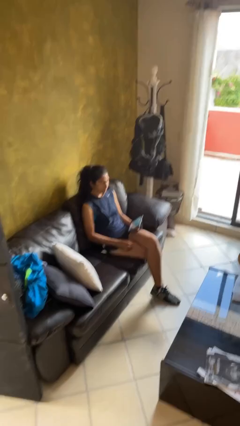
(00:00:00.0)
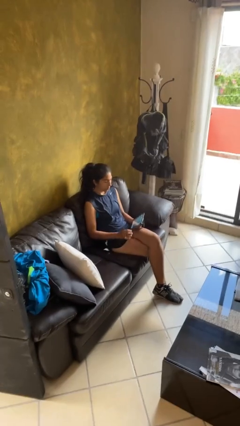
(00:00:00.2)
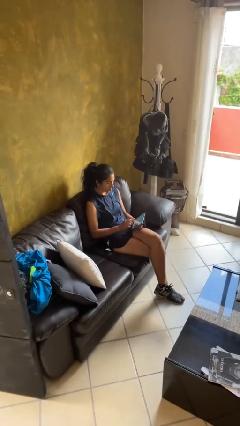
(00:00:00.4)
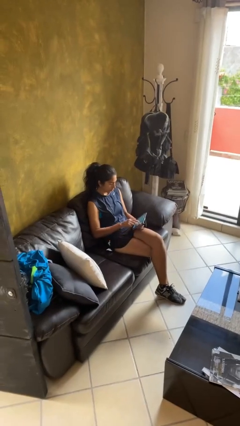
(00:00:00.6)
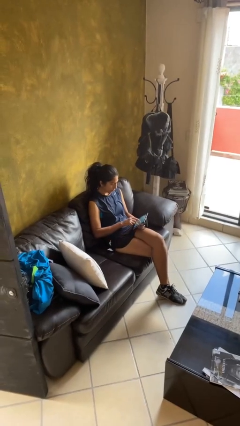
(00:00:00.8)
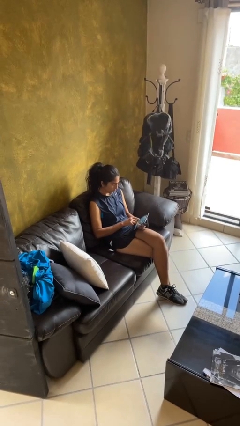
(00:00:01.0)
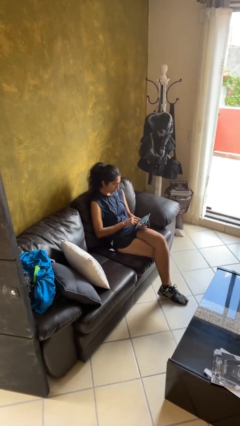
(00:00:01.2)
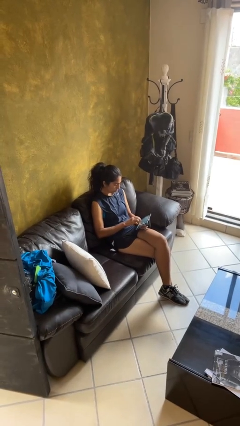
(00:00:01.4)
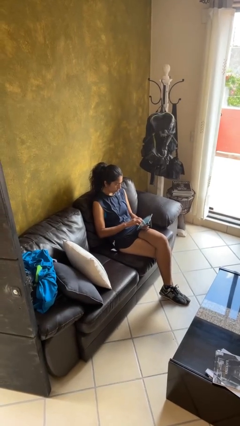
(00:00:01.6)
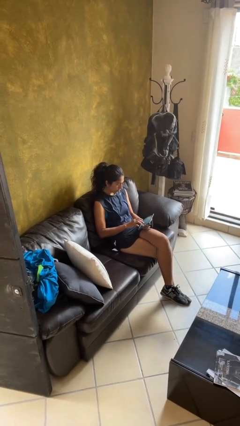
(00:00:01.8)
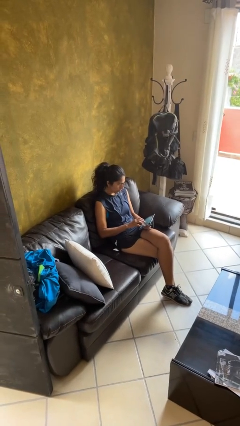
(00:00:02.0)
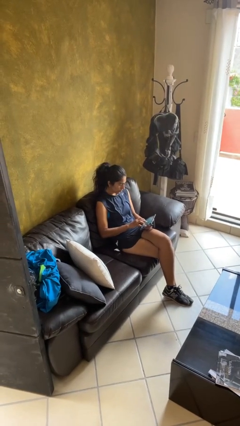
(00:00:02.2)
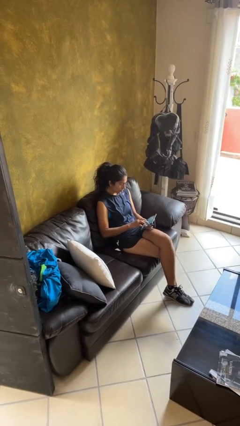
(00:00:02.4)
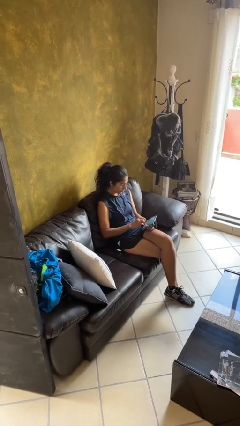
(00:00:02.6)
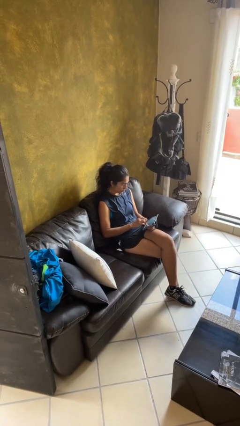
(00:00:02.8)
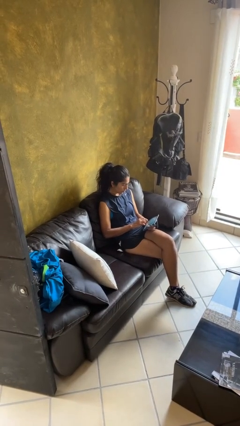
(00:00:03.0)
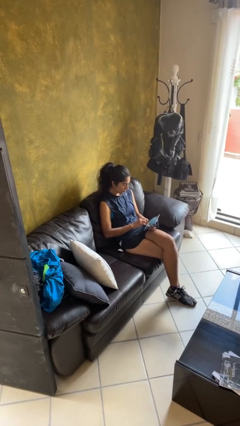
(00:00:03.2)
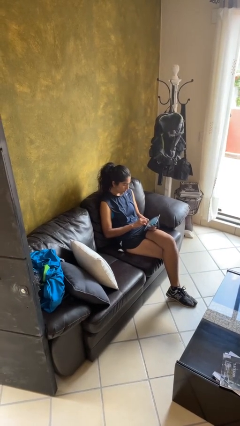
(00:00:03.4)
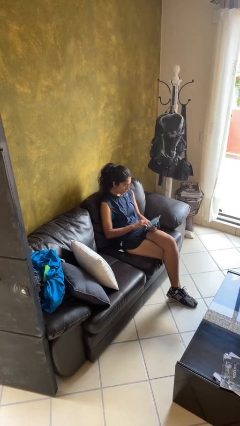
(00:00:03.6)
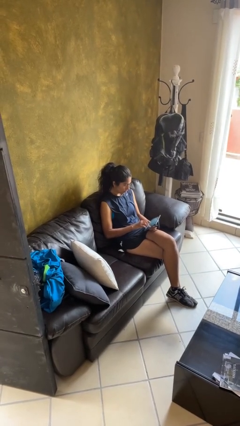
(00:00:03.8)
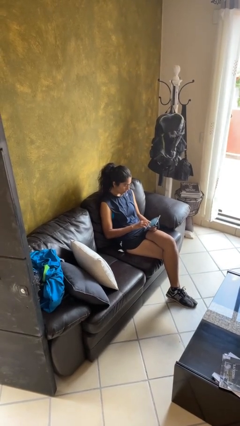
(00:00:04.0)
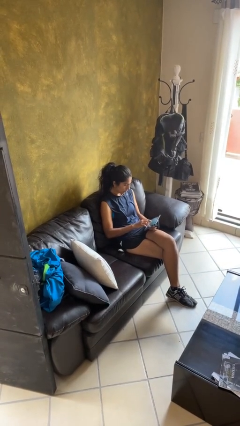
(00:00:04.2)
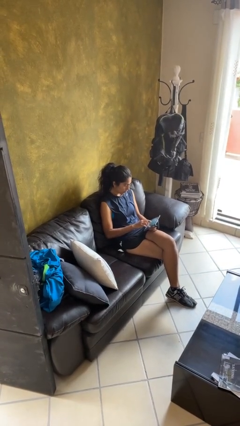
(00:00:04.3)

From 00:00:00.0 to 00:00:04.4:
person interacts with tablet

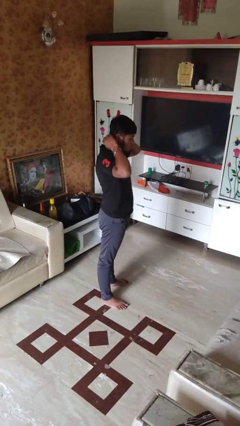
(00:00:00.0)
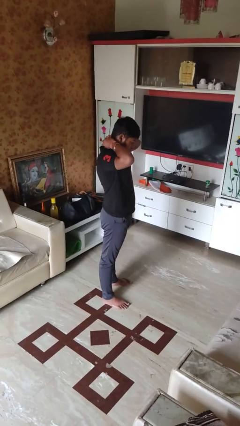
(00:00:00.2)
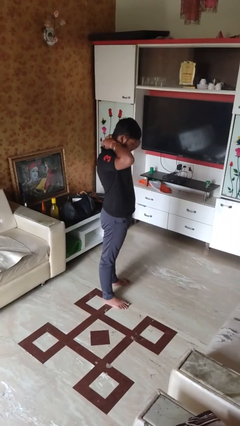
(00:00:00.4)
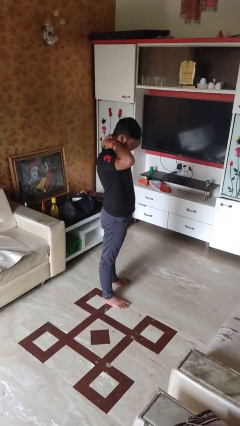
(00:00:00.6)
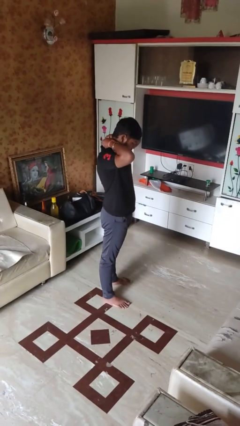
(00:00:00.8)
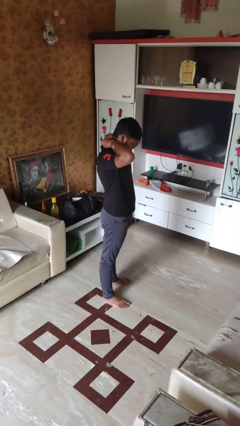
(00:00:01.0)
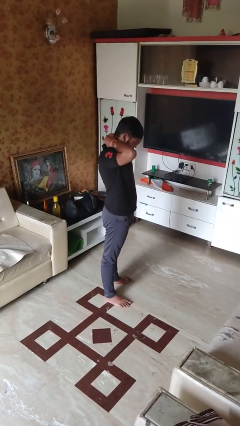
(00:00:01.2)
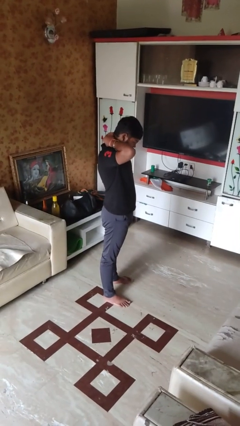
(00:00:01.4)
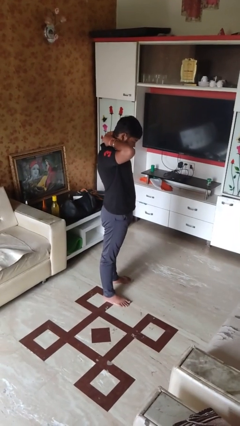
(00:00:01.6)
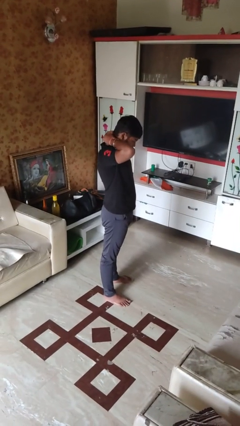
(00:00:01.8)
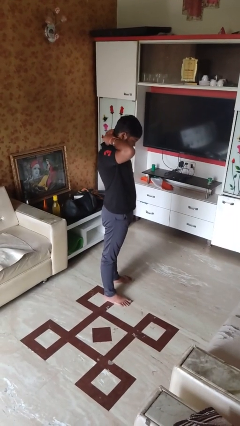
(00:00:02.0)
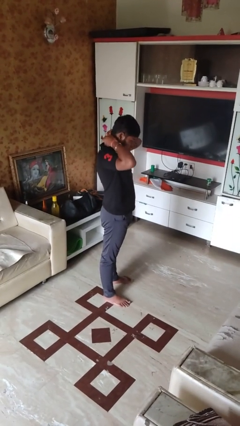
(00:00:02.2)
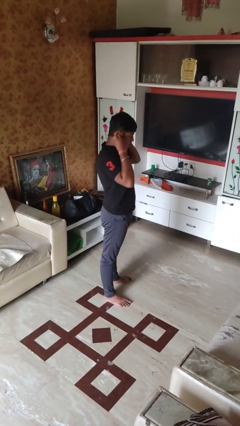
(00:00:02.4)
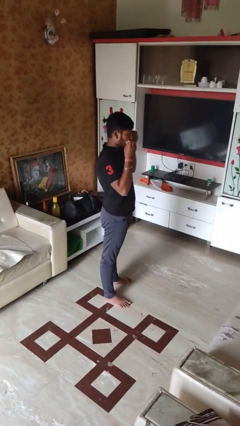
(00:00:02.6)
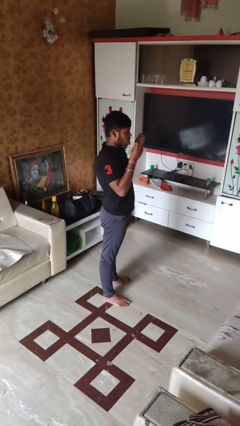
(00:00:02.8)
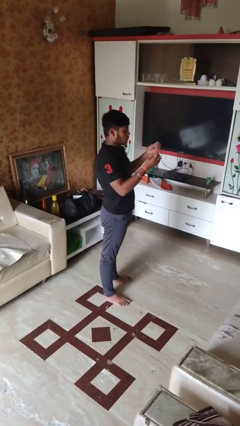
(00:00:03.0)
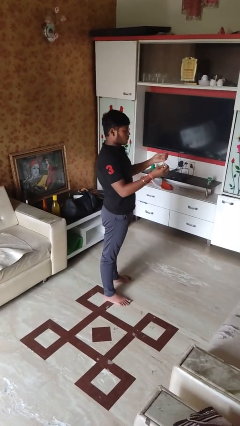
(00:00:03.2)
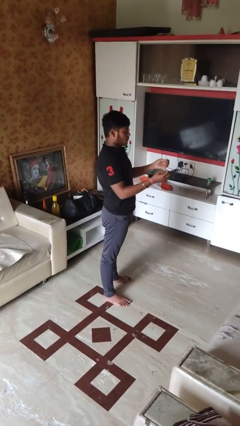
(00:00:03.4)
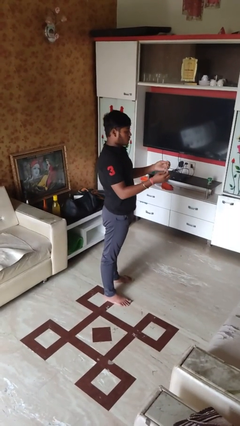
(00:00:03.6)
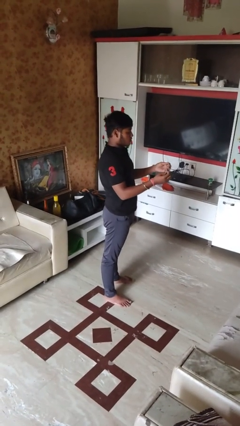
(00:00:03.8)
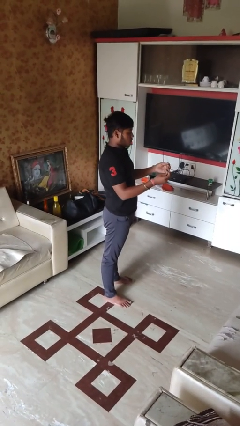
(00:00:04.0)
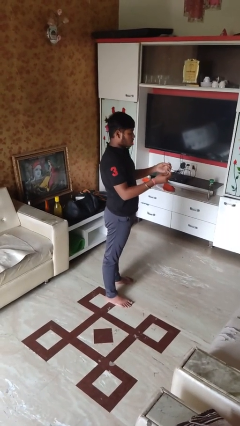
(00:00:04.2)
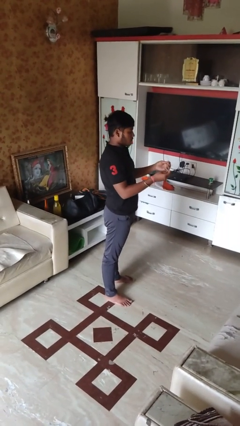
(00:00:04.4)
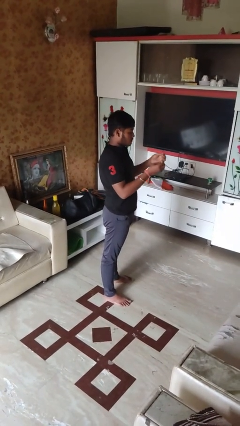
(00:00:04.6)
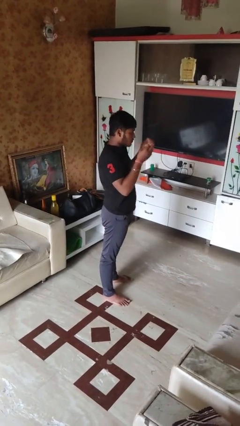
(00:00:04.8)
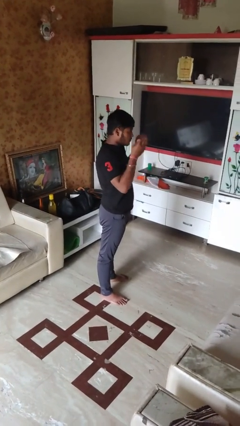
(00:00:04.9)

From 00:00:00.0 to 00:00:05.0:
person takes off necklace

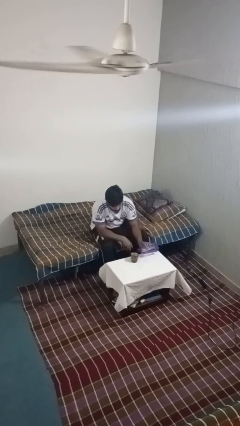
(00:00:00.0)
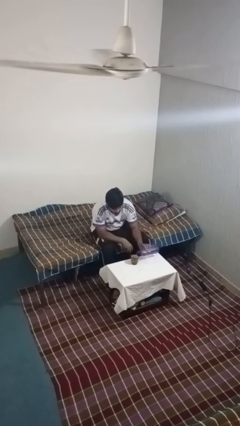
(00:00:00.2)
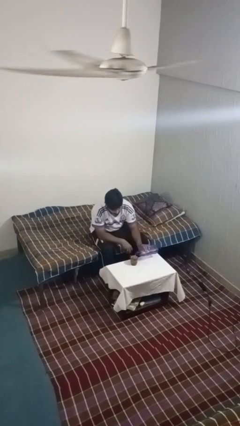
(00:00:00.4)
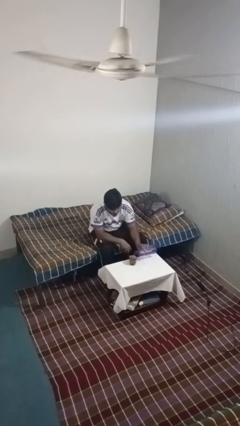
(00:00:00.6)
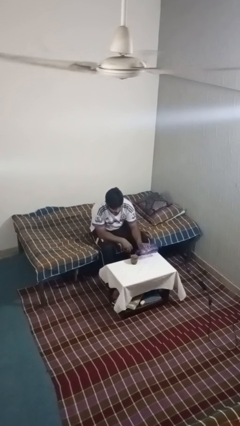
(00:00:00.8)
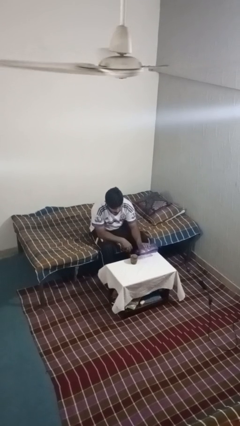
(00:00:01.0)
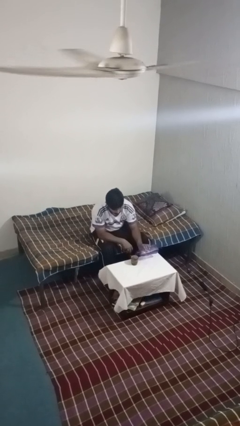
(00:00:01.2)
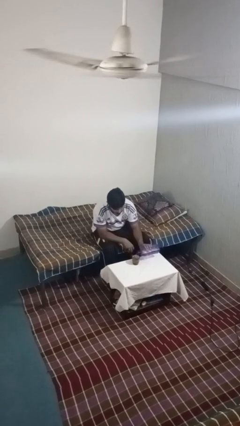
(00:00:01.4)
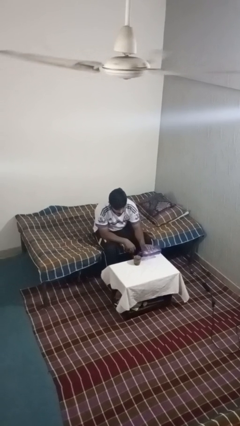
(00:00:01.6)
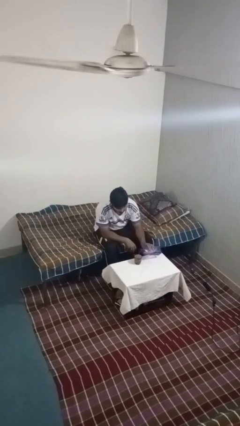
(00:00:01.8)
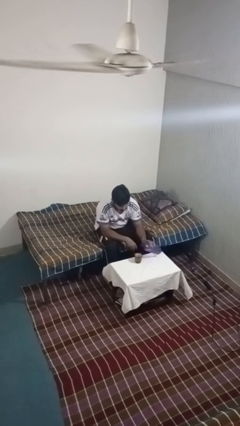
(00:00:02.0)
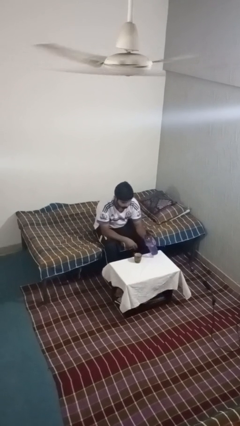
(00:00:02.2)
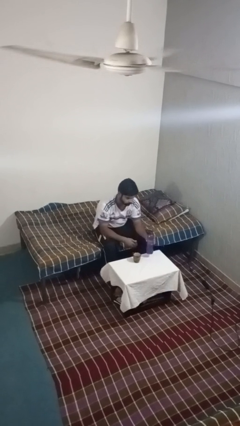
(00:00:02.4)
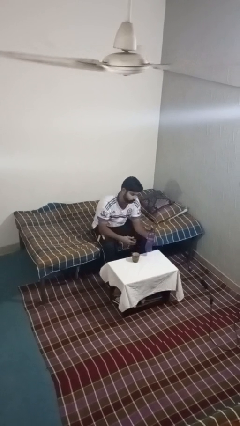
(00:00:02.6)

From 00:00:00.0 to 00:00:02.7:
person pours liquid into cup

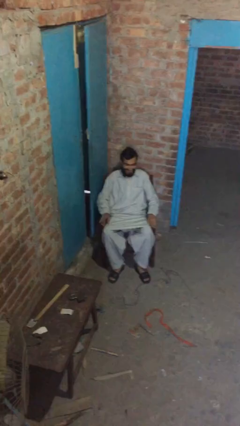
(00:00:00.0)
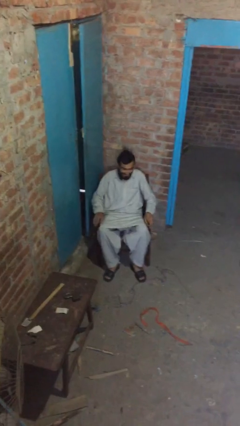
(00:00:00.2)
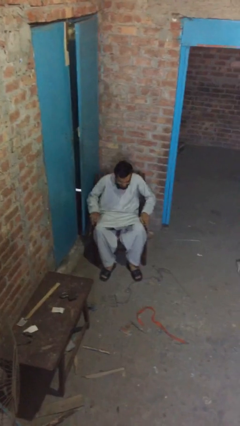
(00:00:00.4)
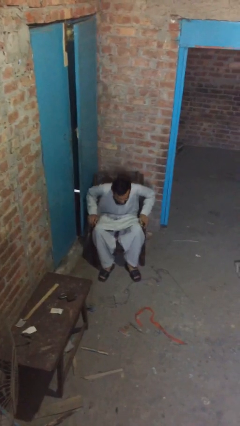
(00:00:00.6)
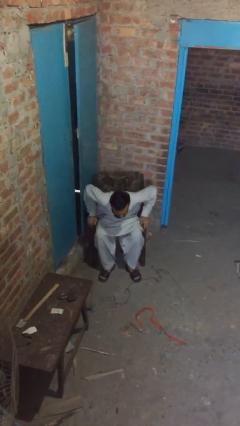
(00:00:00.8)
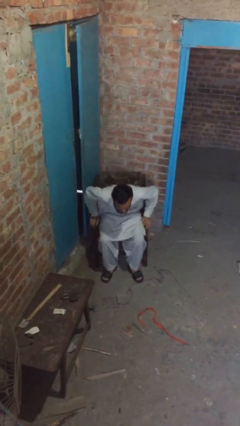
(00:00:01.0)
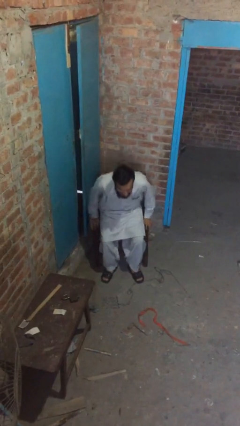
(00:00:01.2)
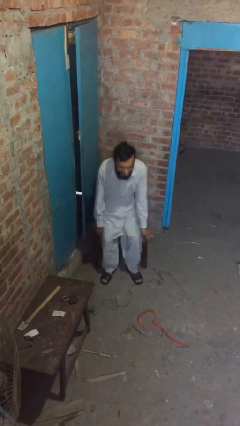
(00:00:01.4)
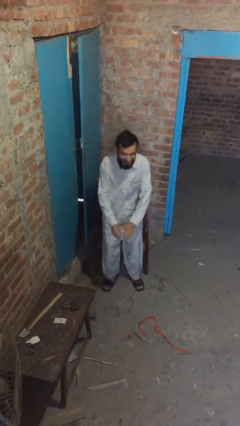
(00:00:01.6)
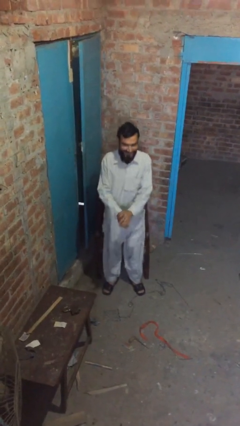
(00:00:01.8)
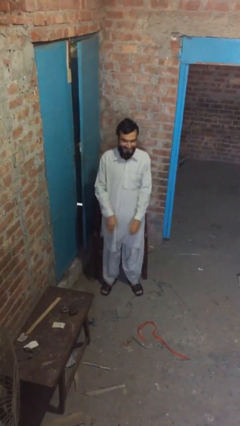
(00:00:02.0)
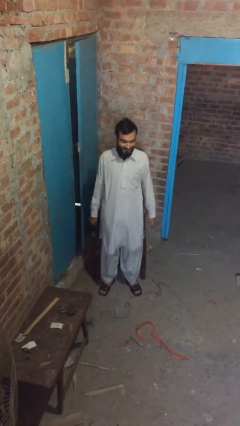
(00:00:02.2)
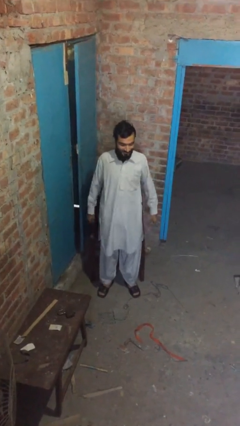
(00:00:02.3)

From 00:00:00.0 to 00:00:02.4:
person stands up

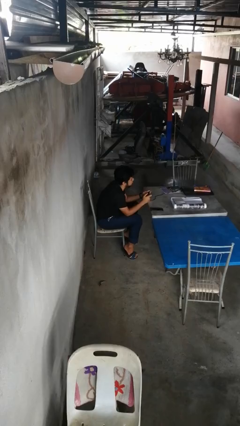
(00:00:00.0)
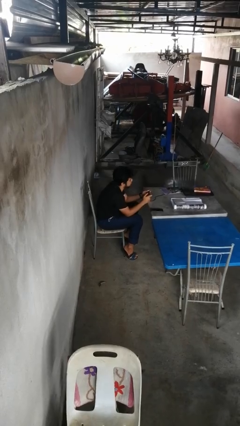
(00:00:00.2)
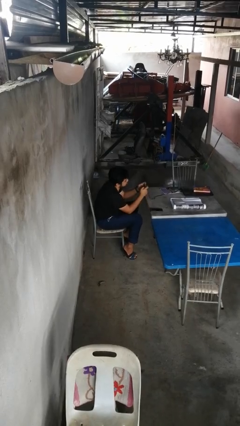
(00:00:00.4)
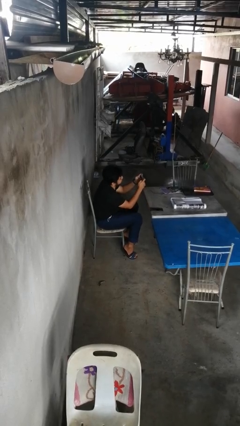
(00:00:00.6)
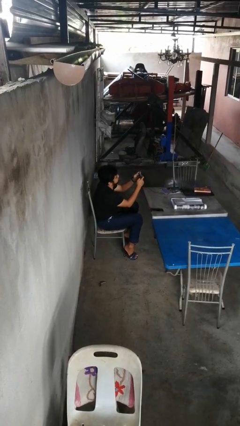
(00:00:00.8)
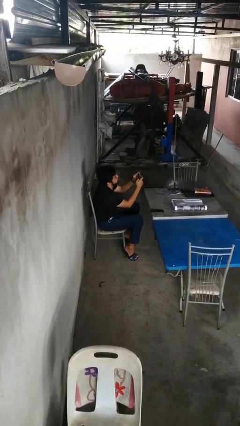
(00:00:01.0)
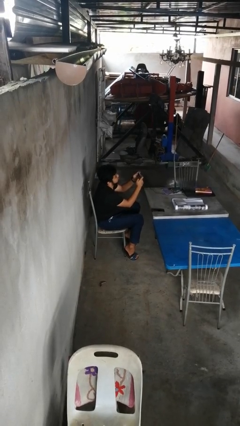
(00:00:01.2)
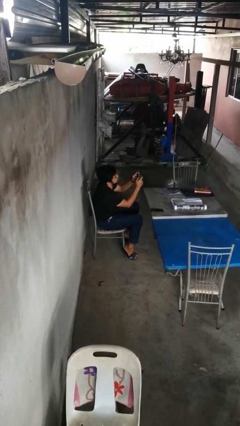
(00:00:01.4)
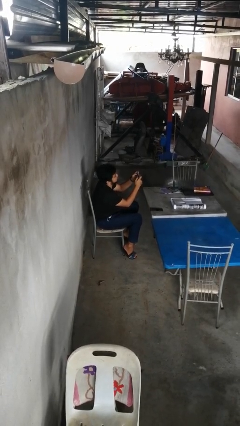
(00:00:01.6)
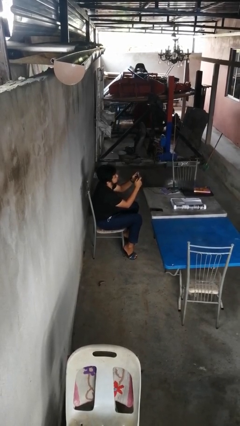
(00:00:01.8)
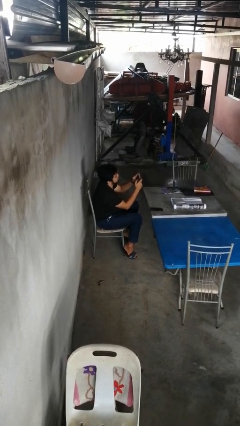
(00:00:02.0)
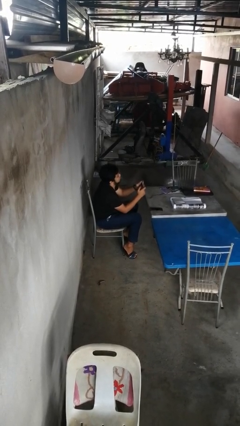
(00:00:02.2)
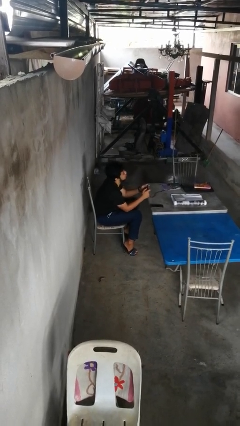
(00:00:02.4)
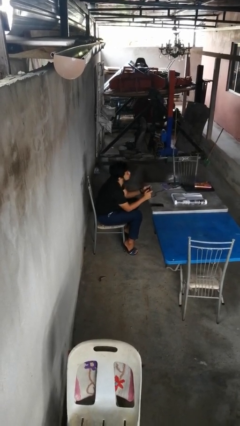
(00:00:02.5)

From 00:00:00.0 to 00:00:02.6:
person interacts with handheld game

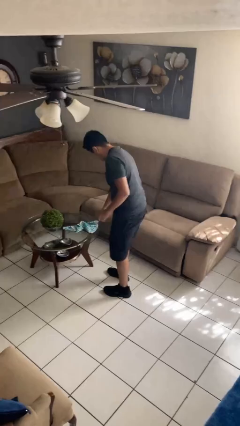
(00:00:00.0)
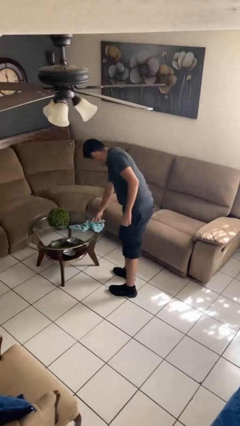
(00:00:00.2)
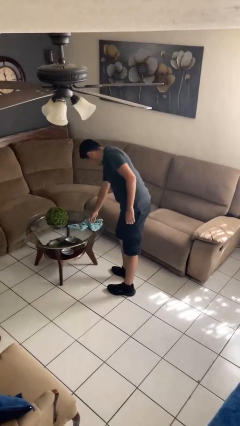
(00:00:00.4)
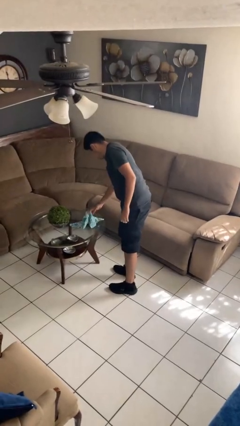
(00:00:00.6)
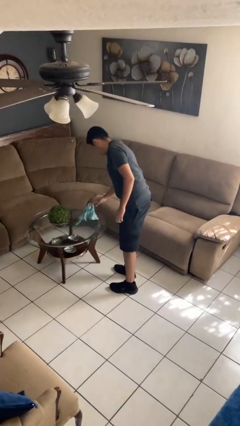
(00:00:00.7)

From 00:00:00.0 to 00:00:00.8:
person picks up object from table
